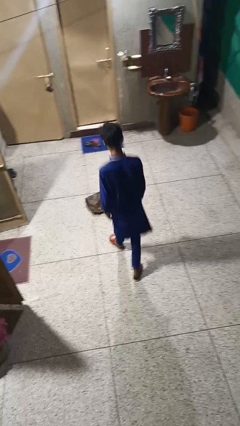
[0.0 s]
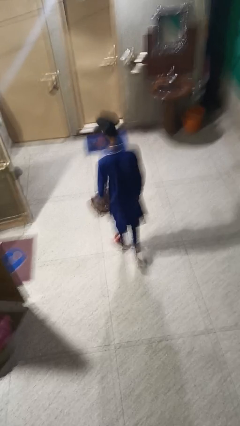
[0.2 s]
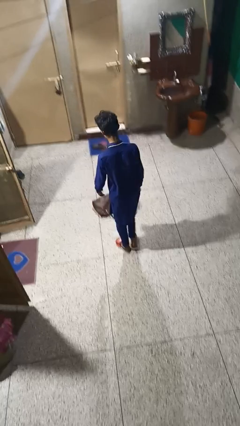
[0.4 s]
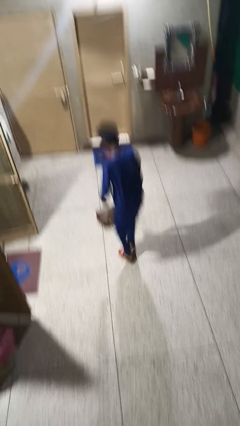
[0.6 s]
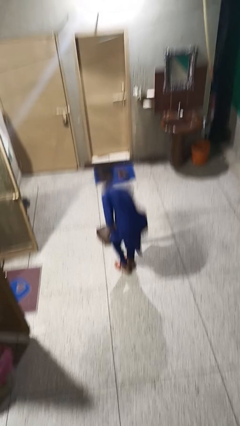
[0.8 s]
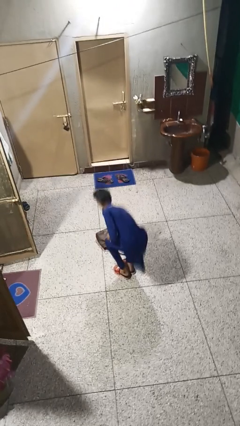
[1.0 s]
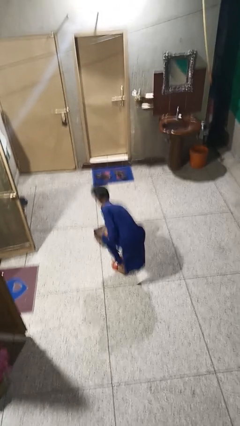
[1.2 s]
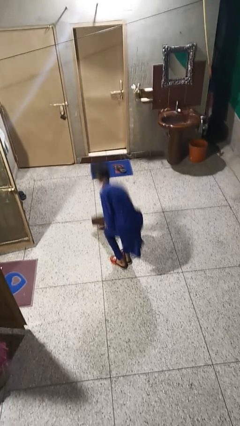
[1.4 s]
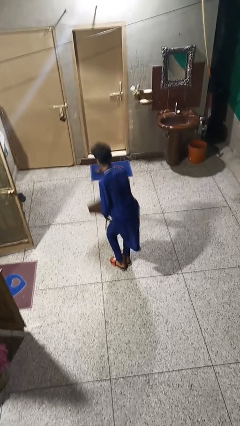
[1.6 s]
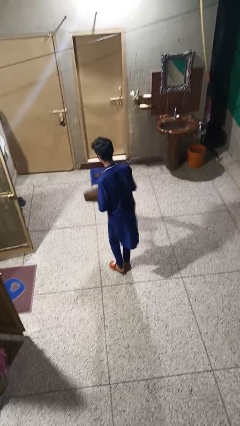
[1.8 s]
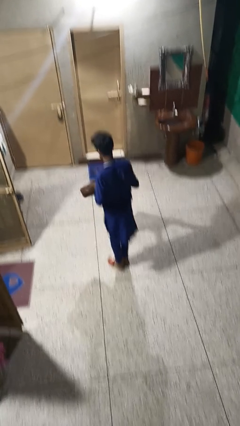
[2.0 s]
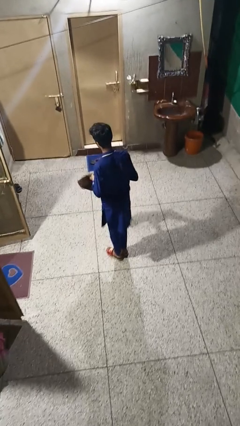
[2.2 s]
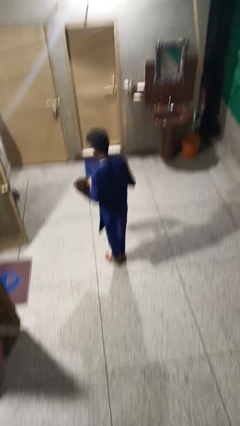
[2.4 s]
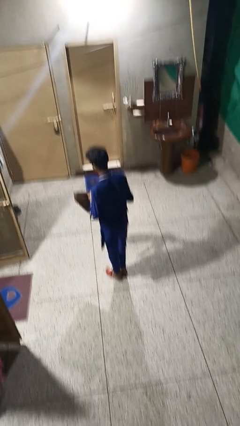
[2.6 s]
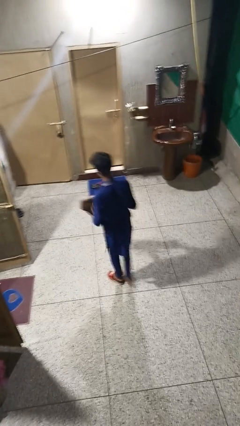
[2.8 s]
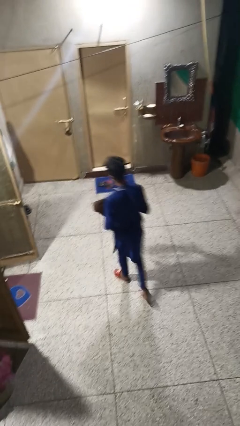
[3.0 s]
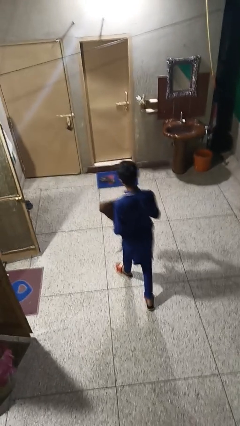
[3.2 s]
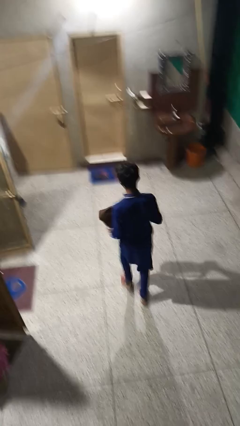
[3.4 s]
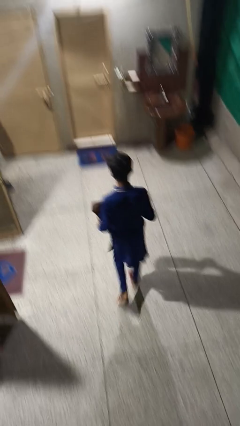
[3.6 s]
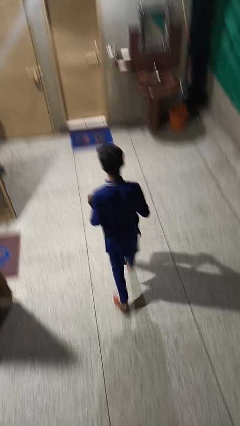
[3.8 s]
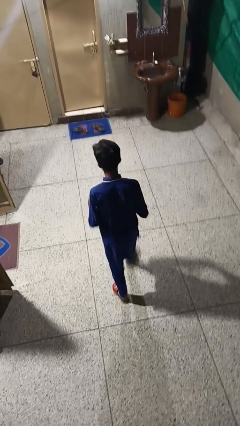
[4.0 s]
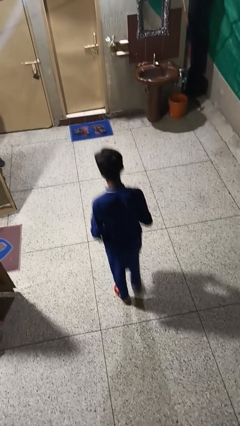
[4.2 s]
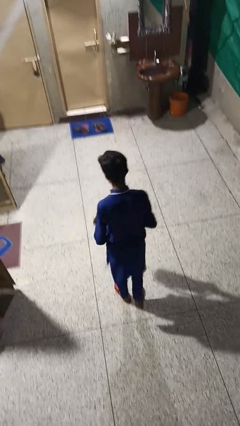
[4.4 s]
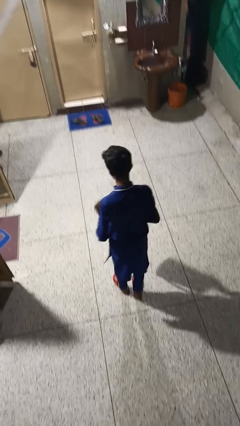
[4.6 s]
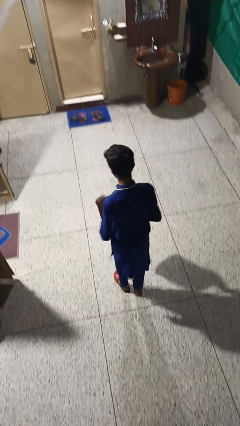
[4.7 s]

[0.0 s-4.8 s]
person picks up object from floor

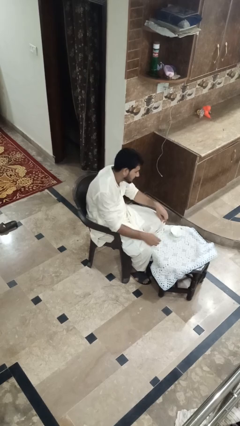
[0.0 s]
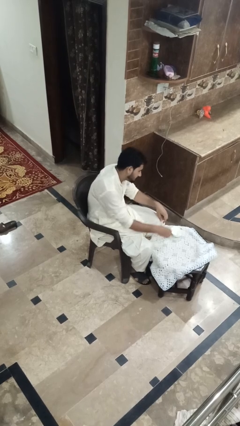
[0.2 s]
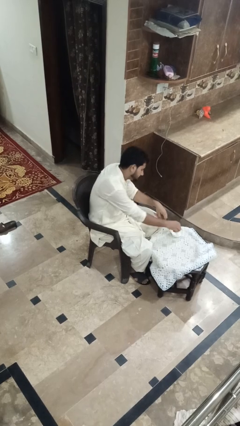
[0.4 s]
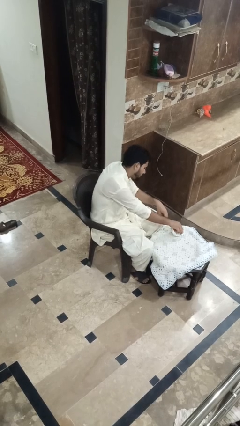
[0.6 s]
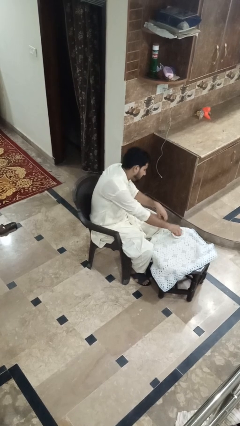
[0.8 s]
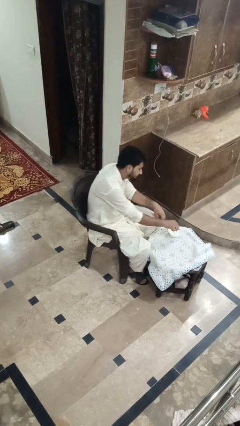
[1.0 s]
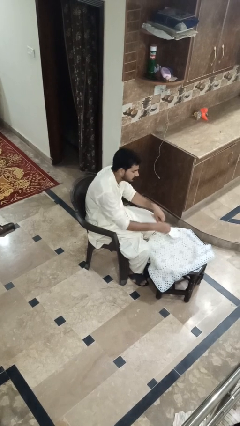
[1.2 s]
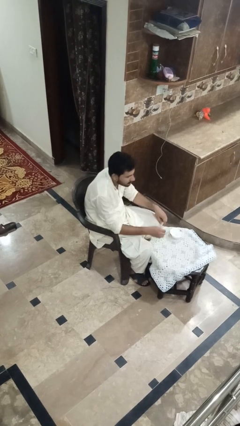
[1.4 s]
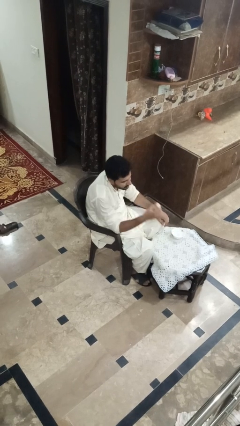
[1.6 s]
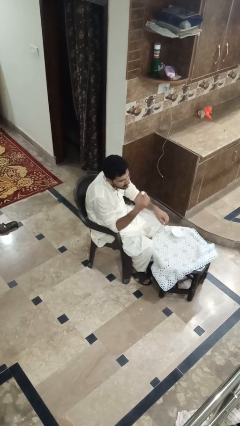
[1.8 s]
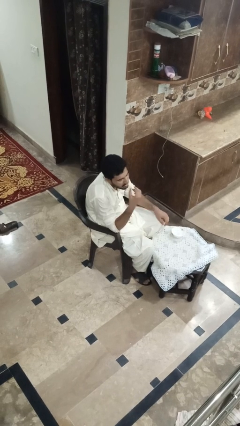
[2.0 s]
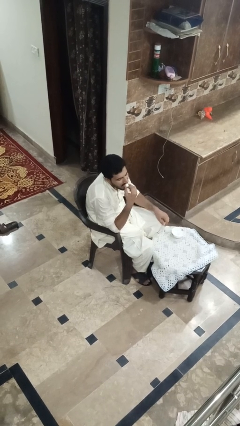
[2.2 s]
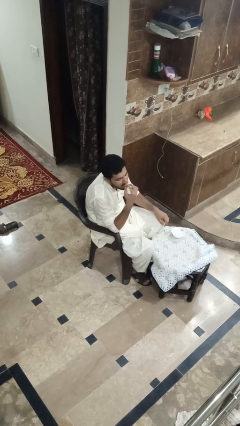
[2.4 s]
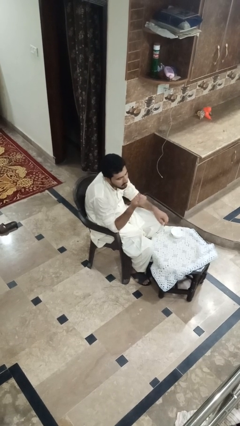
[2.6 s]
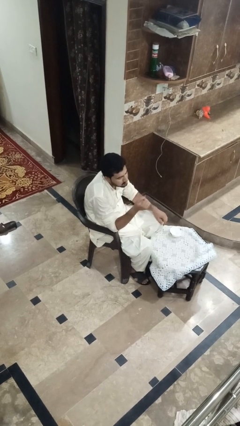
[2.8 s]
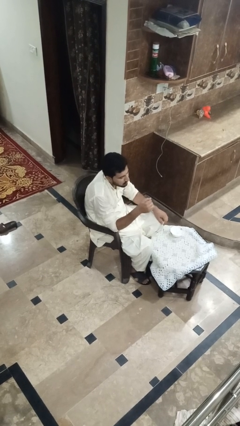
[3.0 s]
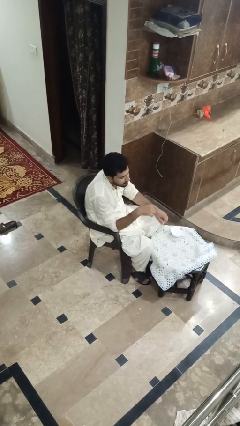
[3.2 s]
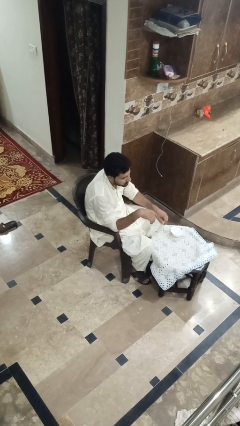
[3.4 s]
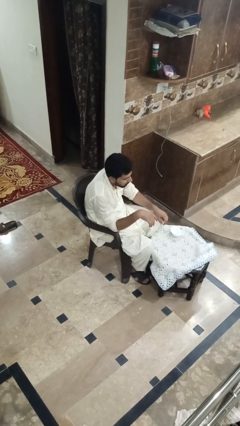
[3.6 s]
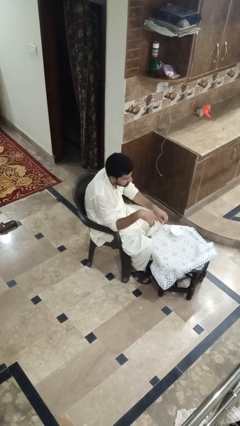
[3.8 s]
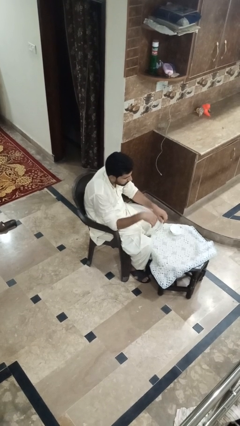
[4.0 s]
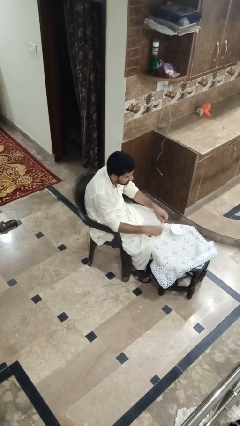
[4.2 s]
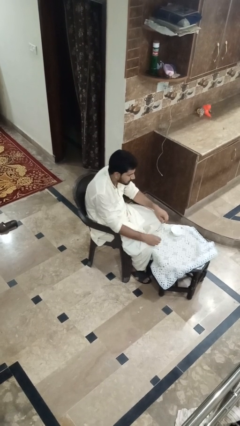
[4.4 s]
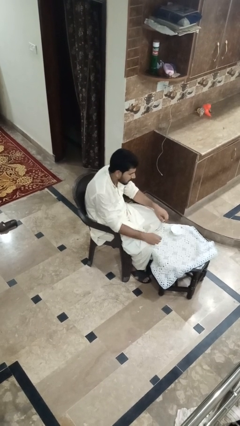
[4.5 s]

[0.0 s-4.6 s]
person eats with hands

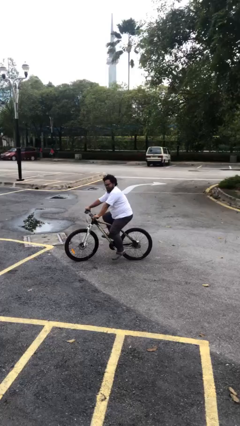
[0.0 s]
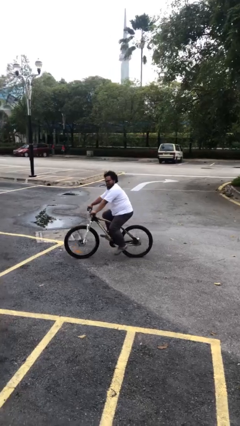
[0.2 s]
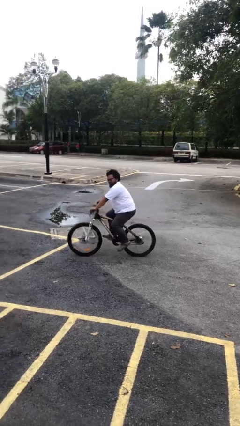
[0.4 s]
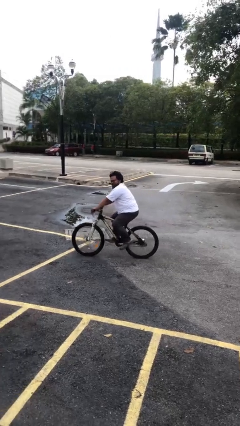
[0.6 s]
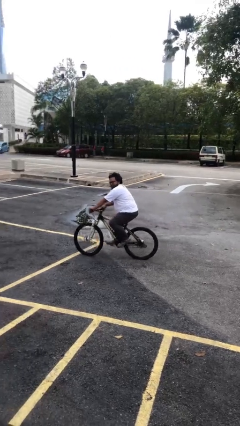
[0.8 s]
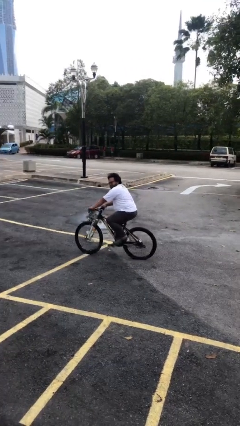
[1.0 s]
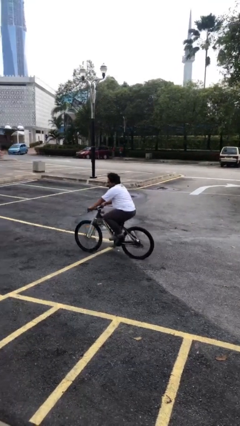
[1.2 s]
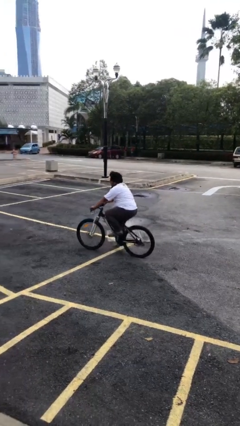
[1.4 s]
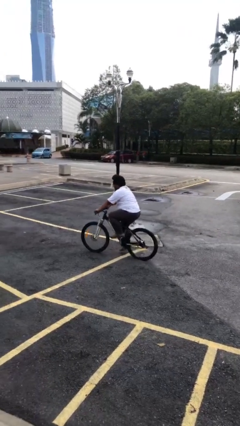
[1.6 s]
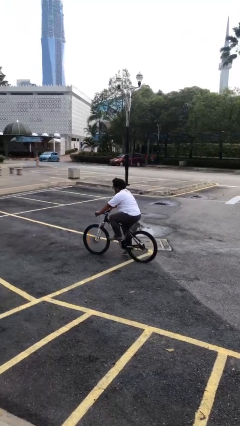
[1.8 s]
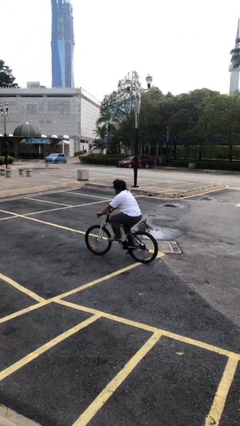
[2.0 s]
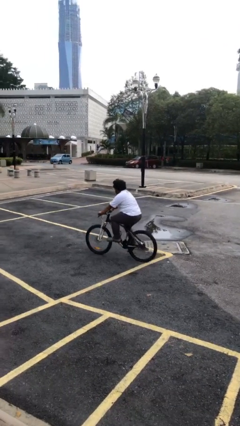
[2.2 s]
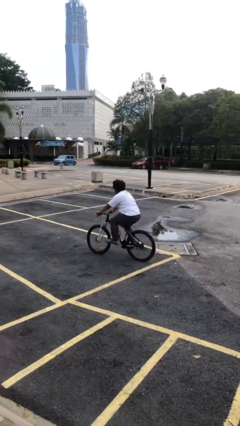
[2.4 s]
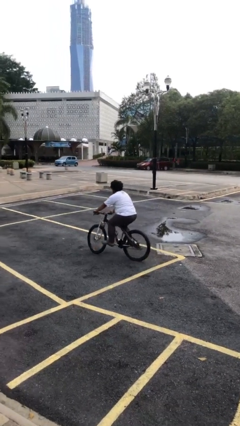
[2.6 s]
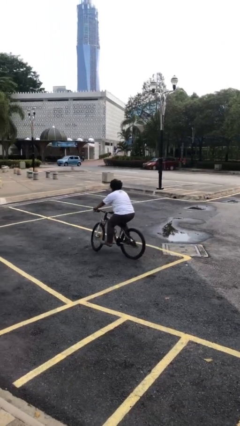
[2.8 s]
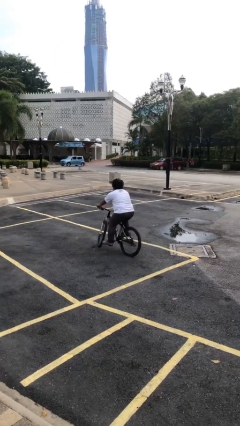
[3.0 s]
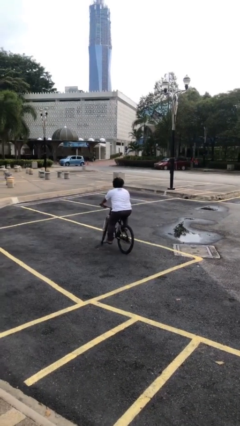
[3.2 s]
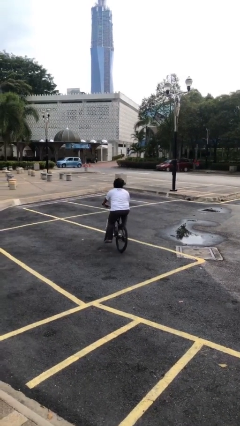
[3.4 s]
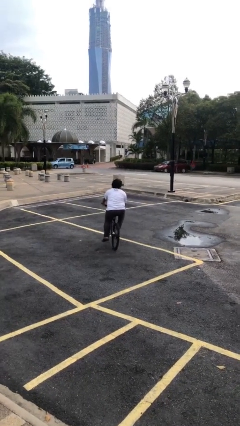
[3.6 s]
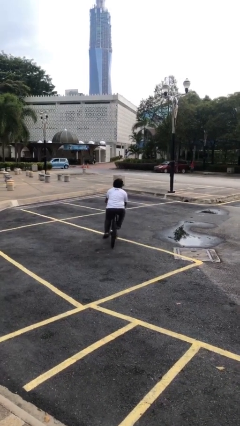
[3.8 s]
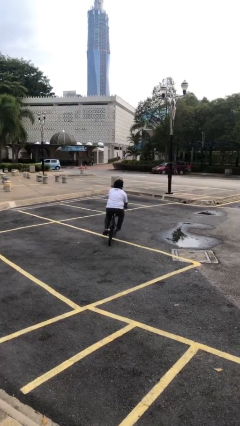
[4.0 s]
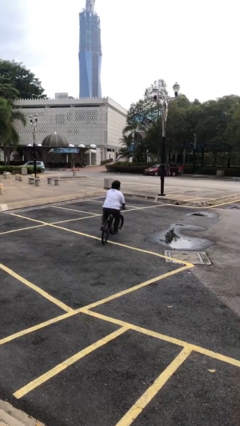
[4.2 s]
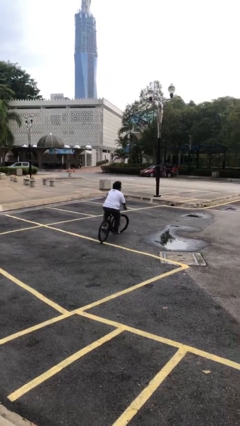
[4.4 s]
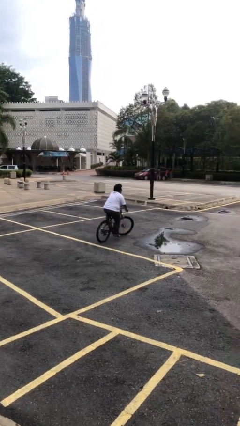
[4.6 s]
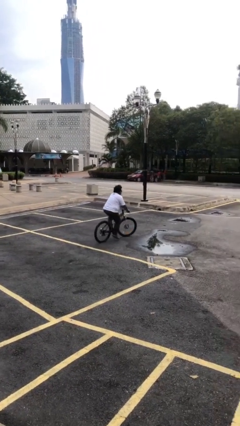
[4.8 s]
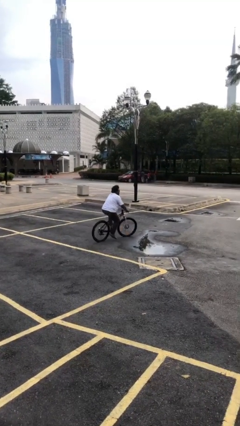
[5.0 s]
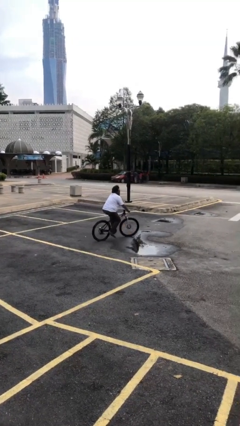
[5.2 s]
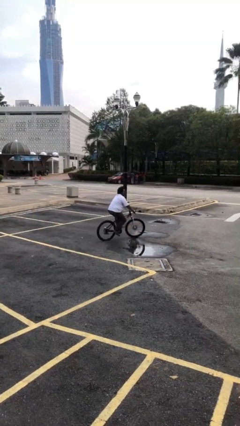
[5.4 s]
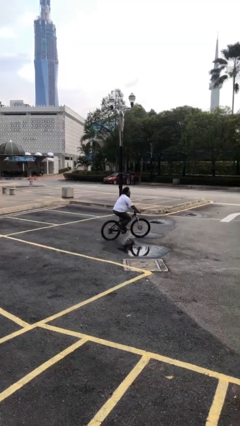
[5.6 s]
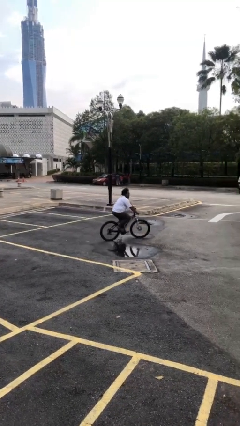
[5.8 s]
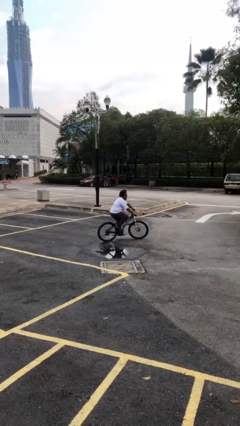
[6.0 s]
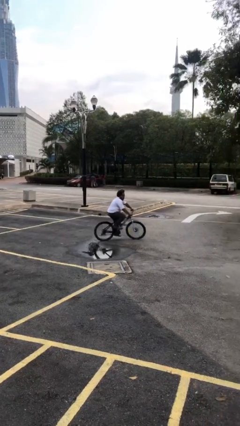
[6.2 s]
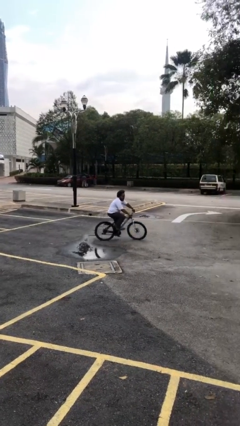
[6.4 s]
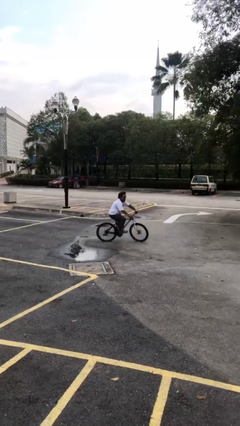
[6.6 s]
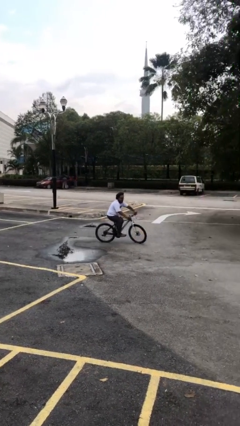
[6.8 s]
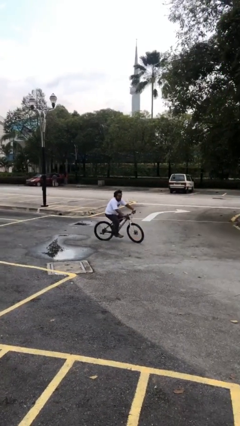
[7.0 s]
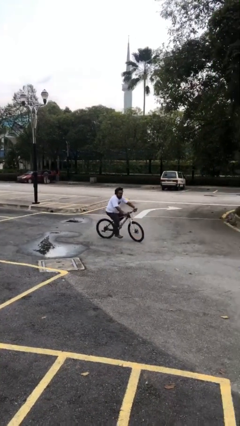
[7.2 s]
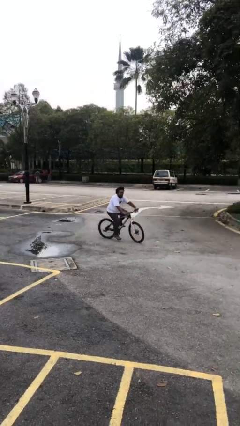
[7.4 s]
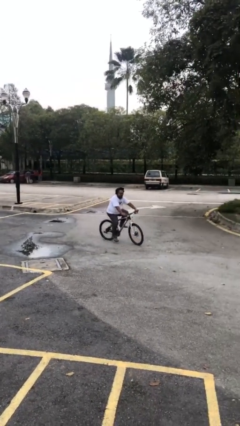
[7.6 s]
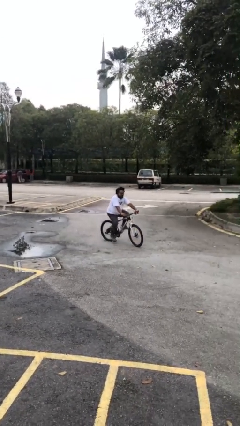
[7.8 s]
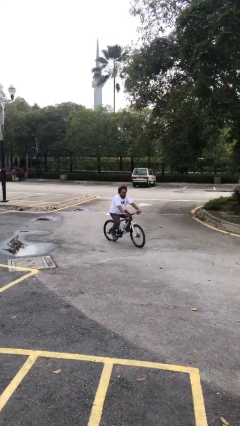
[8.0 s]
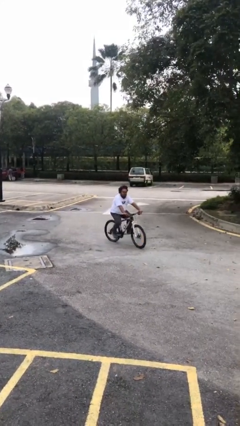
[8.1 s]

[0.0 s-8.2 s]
person rides bicycle

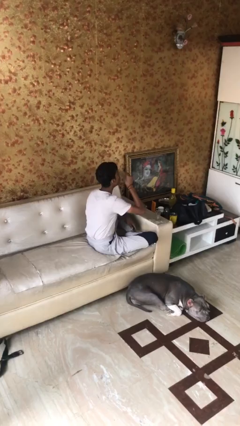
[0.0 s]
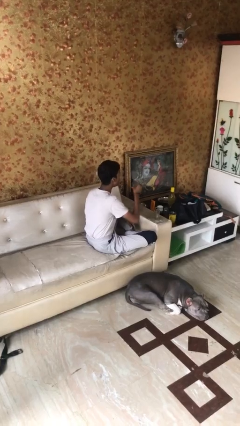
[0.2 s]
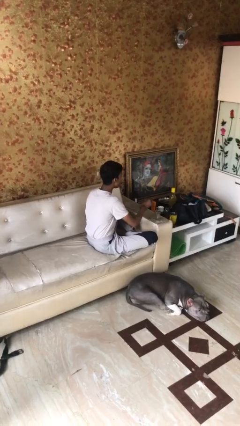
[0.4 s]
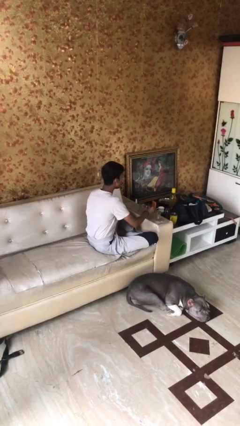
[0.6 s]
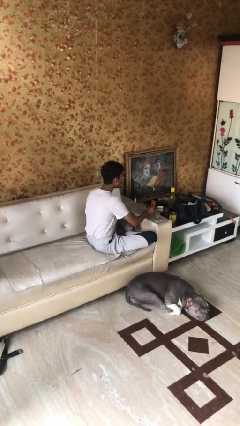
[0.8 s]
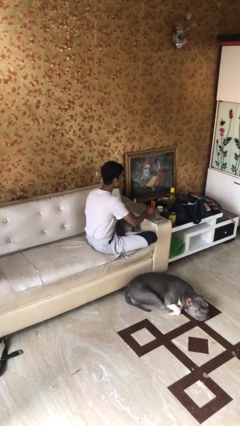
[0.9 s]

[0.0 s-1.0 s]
person puts down object on table
